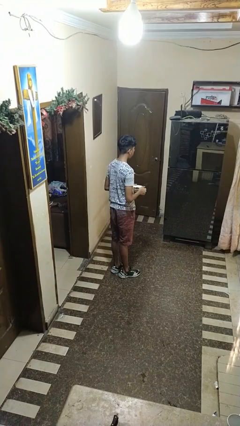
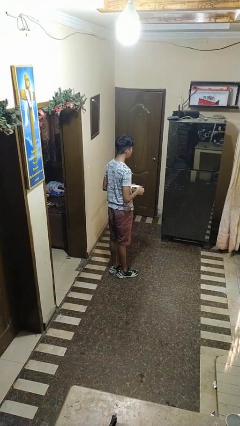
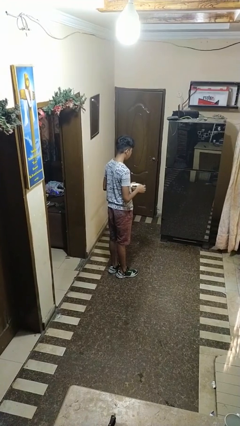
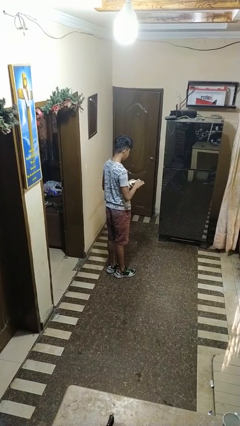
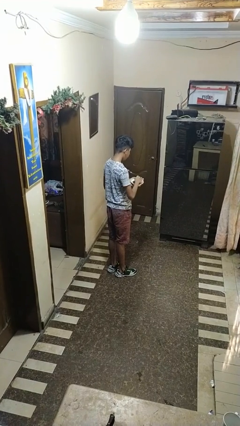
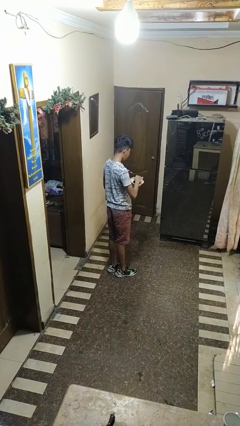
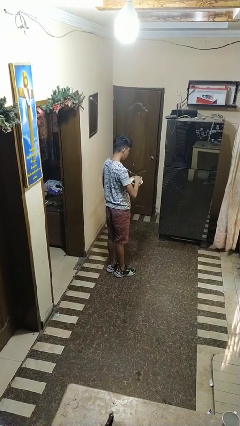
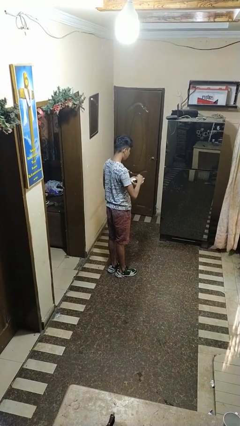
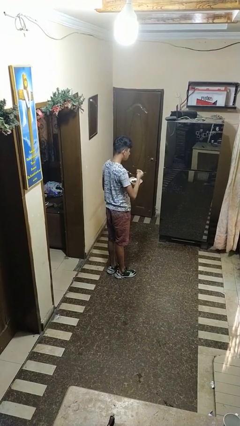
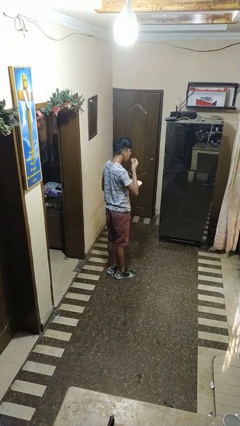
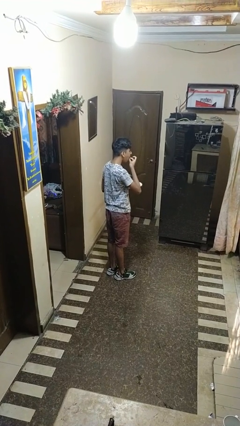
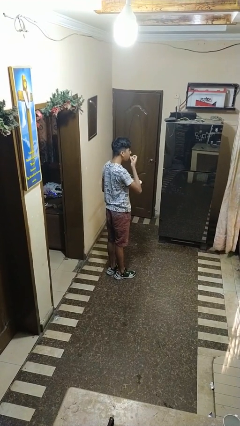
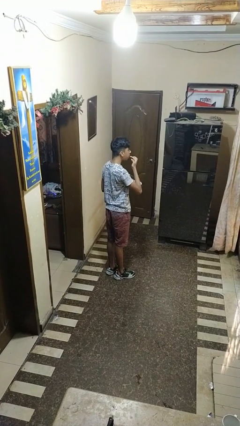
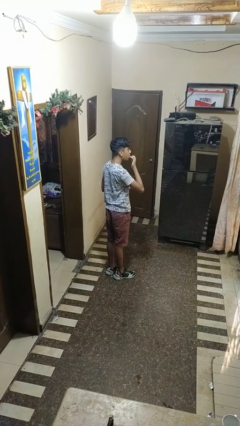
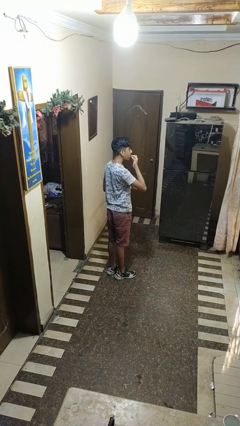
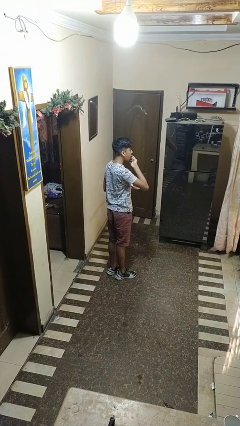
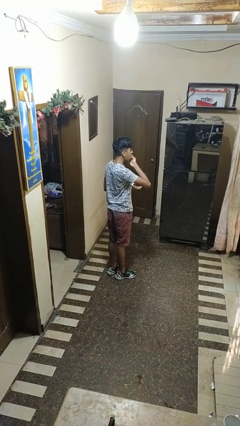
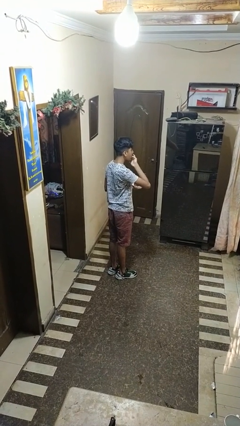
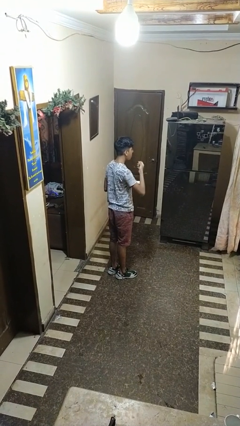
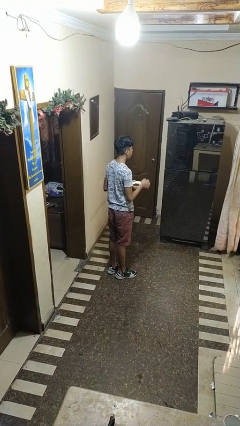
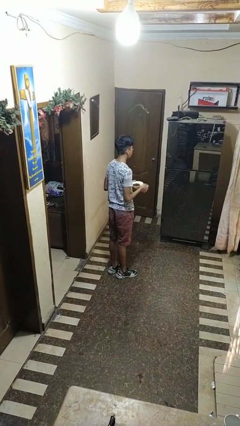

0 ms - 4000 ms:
person licks fingers

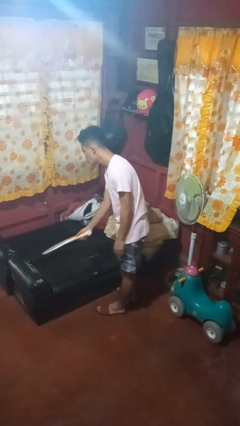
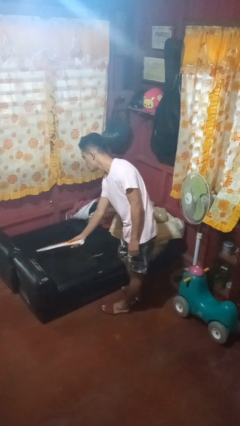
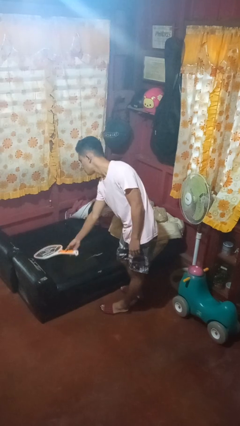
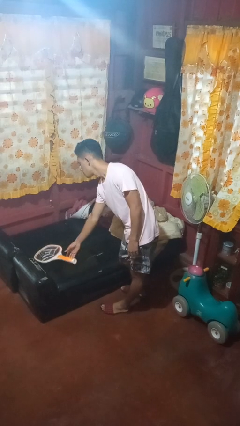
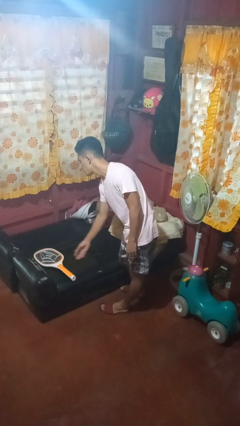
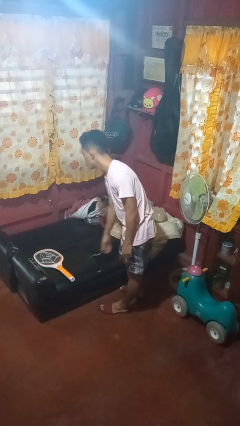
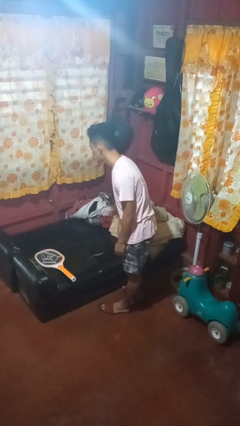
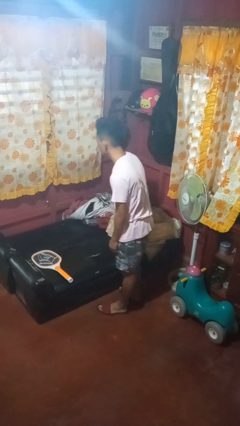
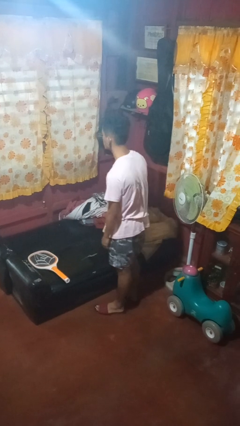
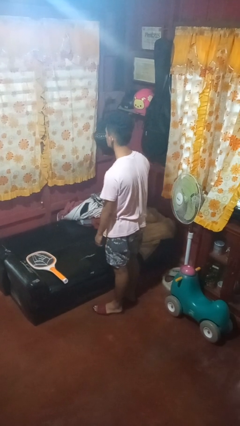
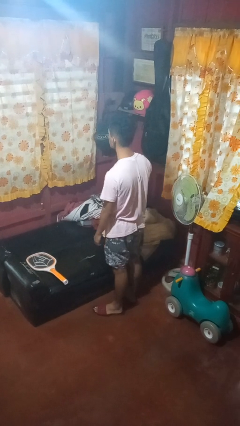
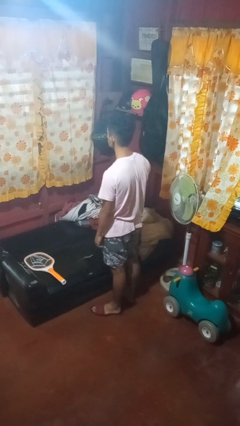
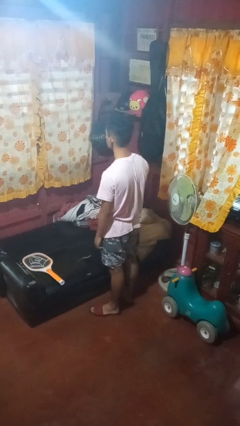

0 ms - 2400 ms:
person puts down object on couch

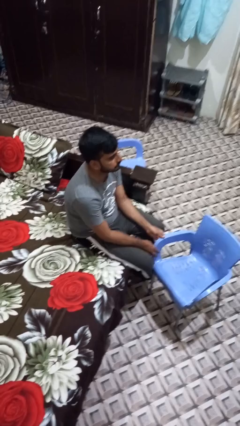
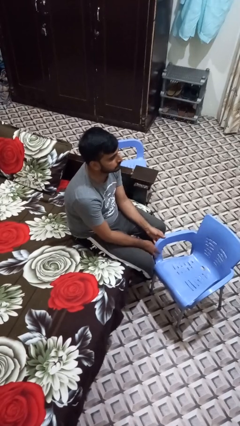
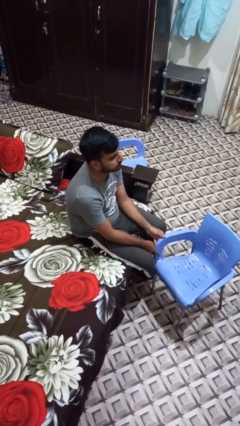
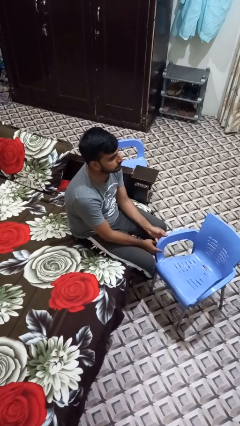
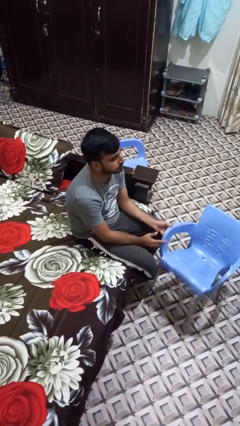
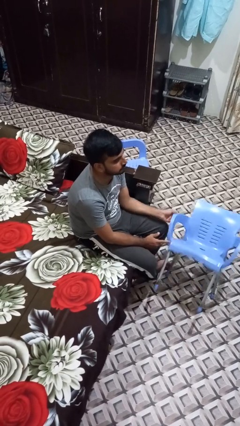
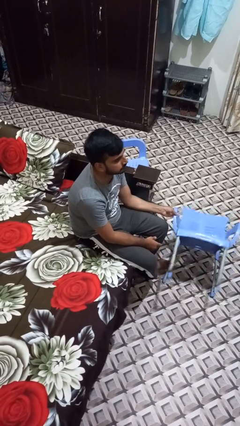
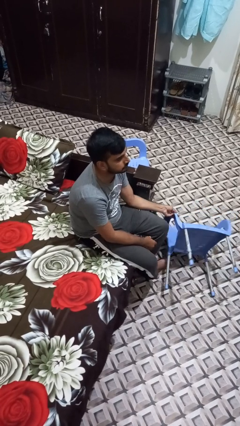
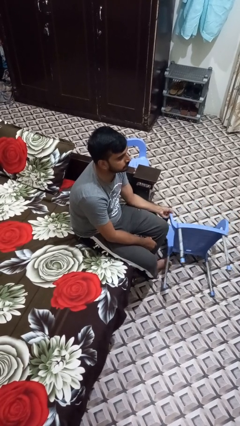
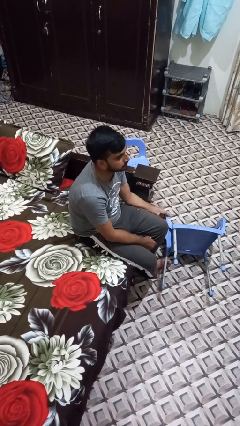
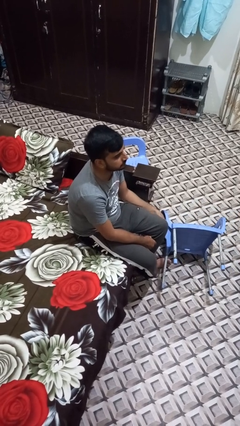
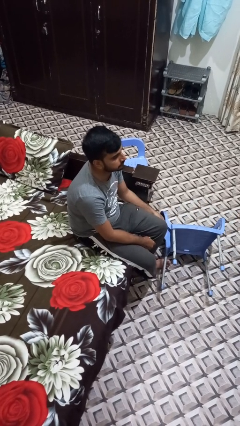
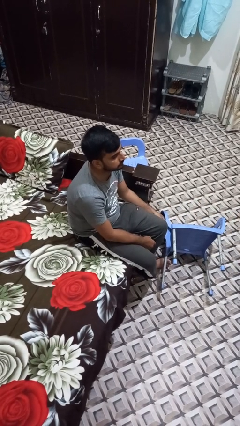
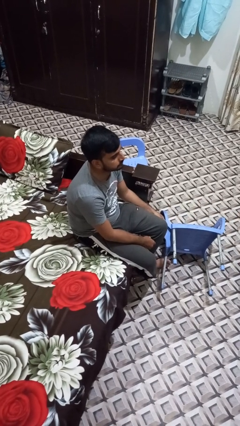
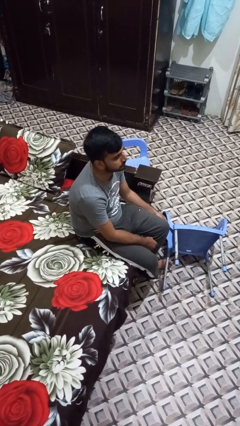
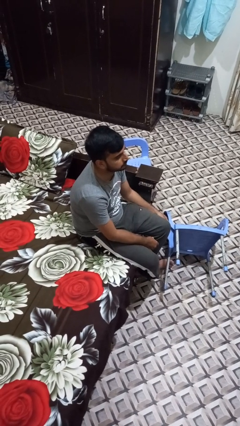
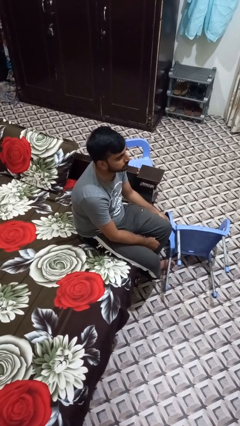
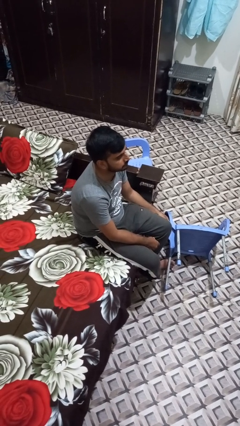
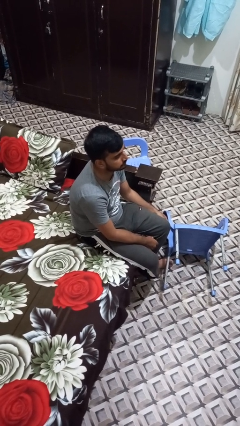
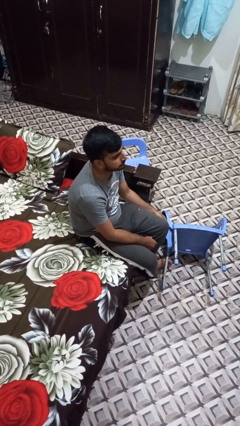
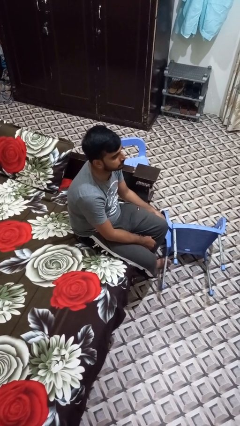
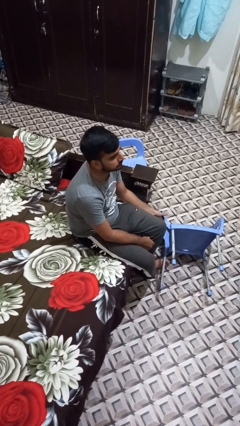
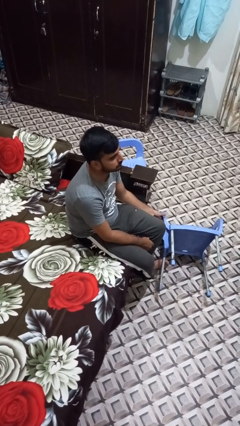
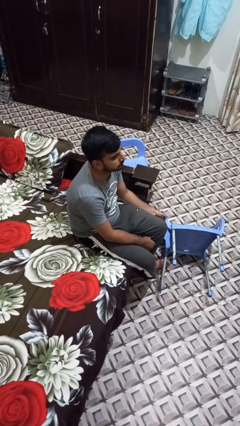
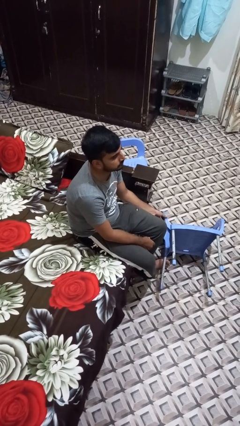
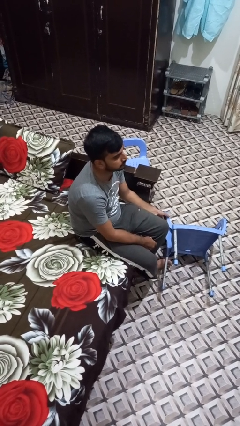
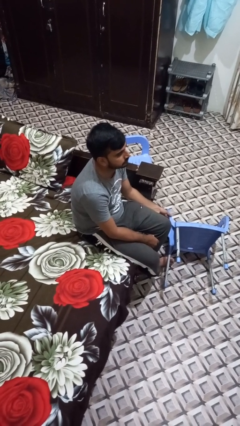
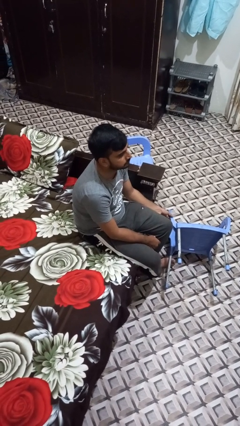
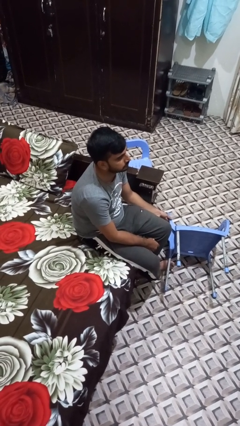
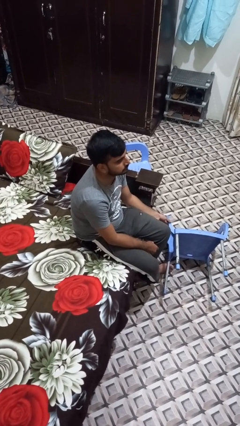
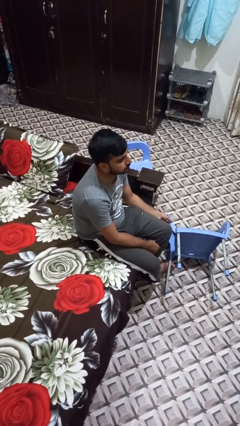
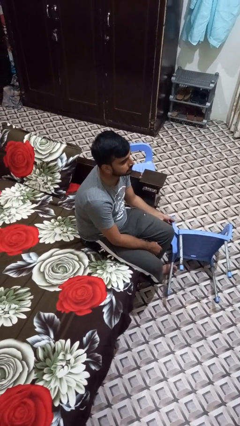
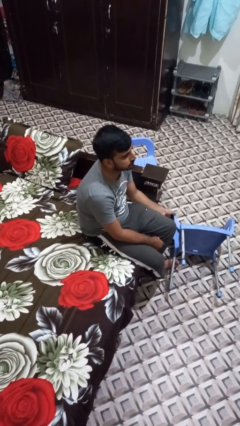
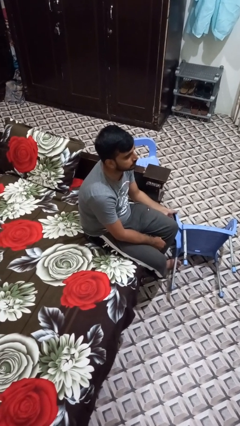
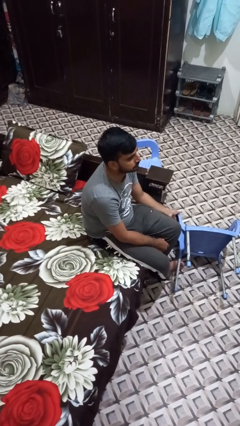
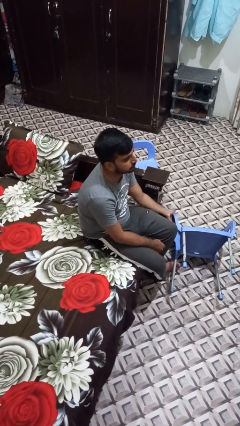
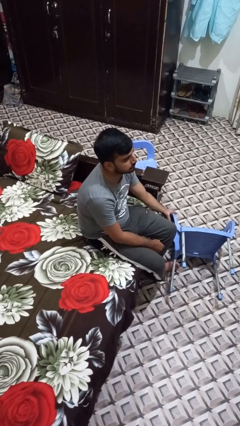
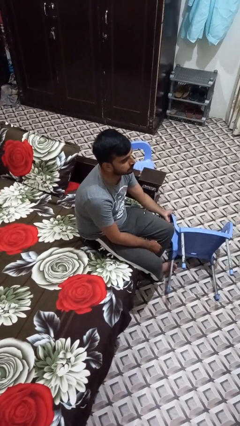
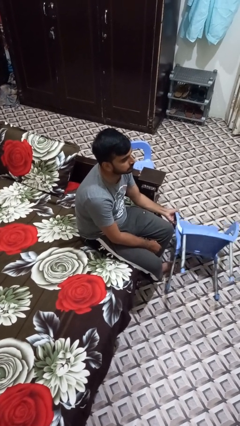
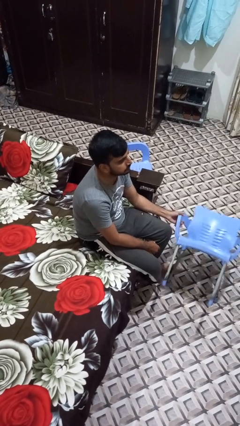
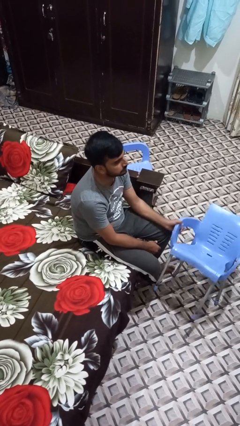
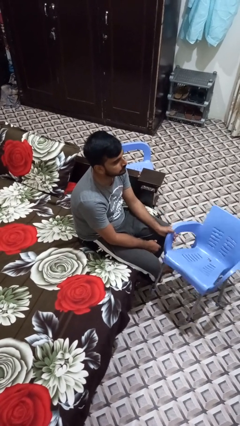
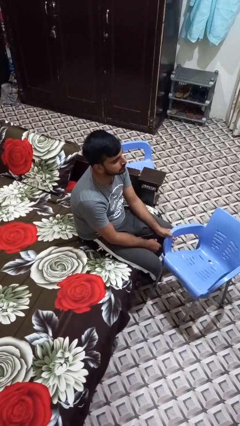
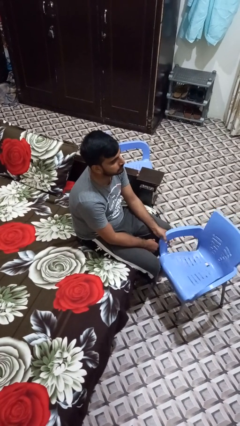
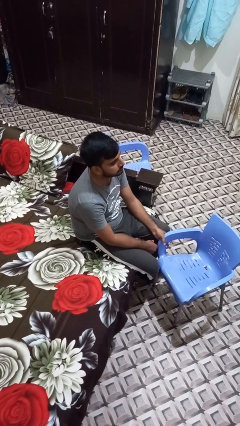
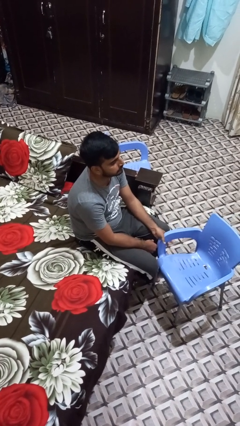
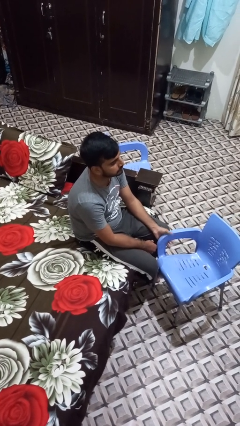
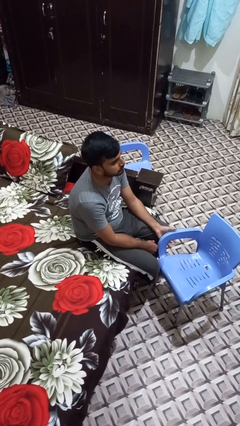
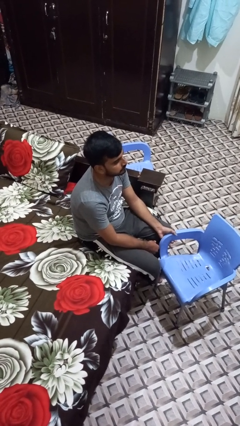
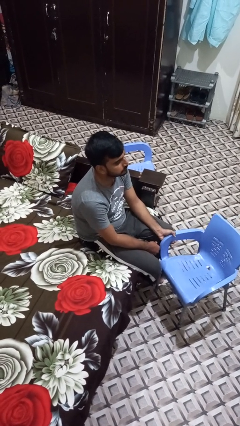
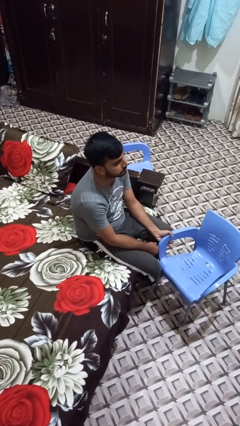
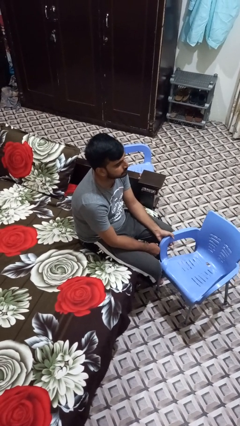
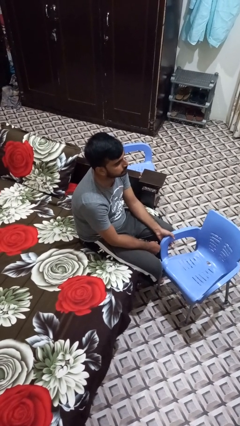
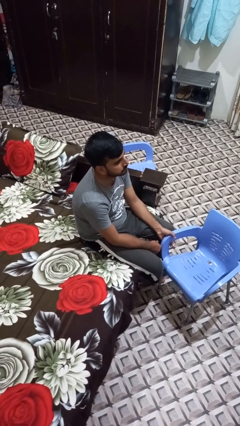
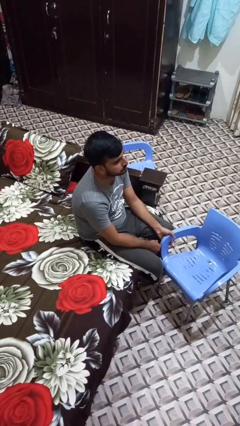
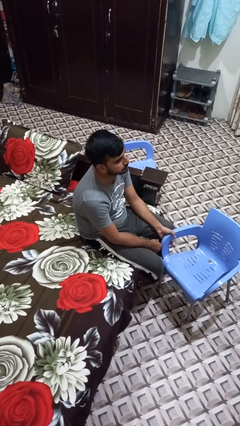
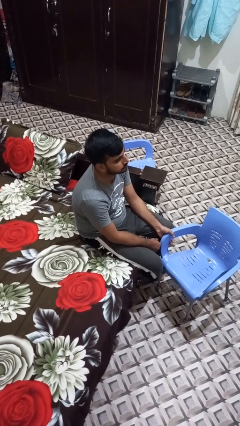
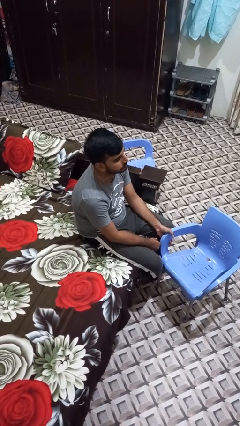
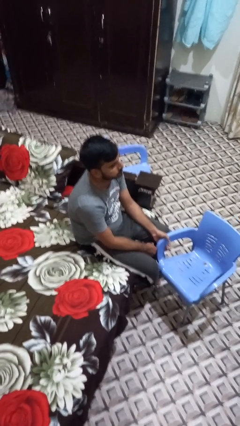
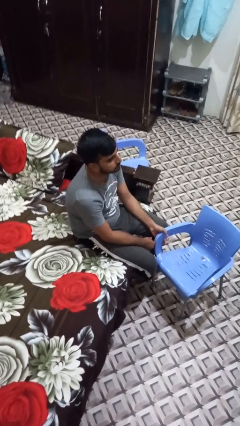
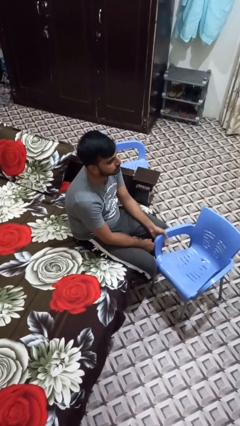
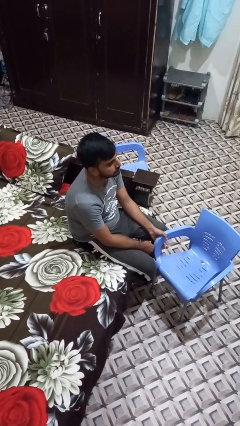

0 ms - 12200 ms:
person knocks over furniture
